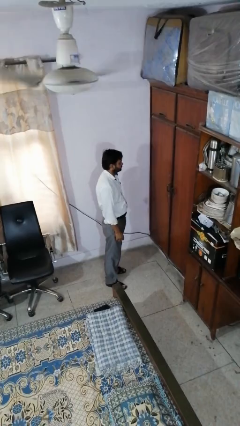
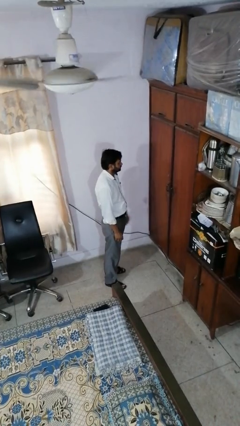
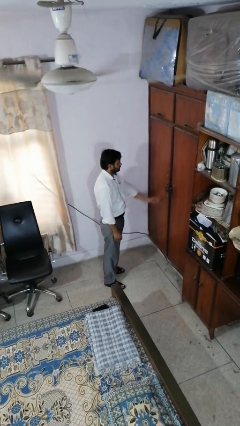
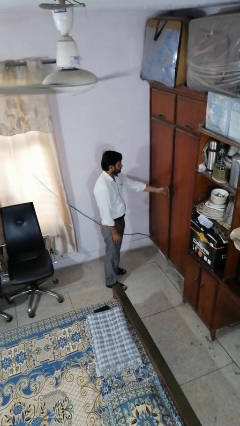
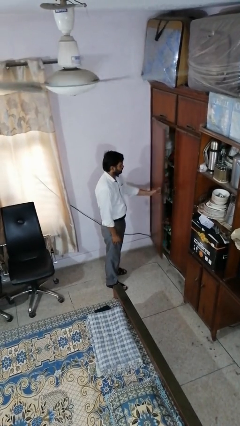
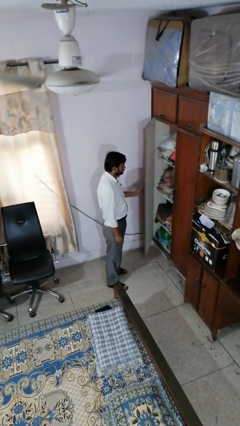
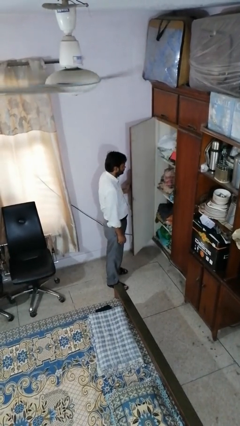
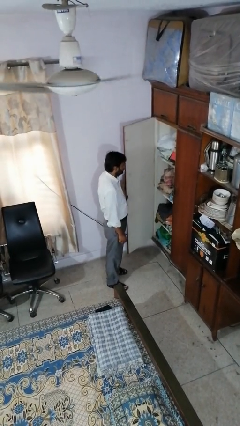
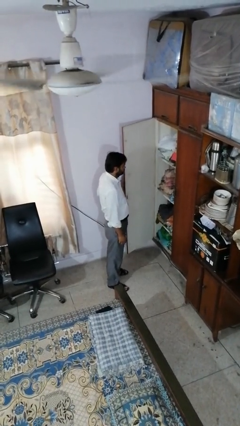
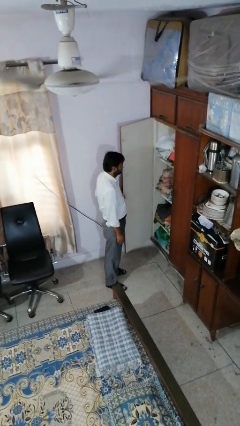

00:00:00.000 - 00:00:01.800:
person opens closet door

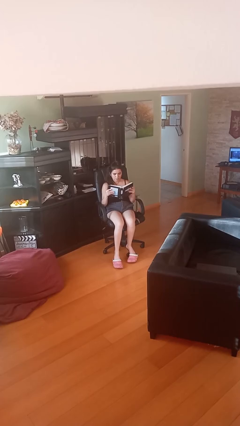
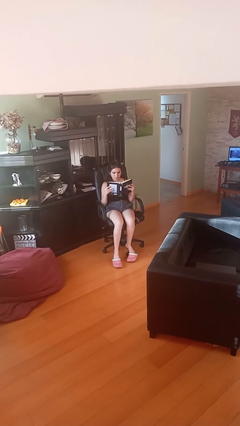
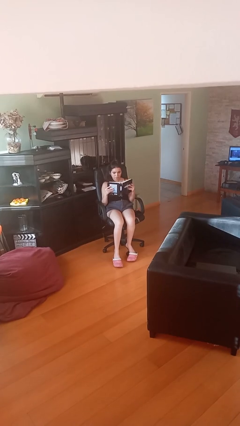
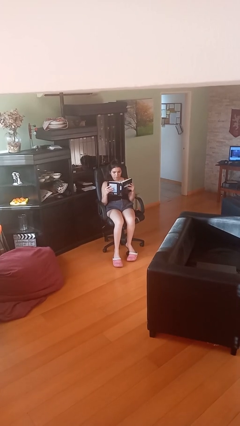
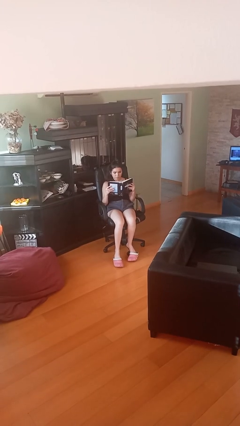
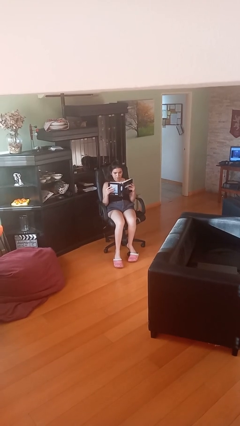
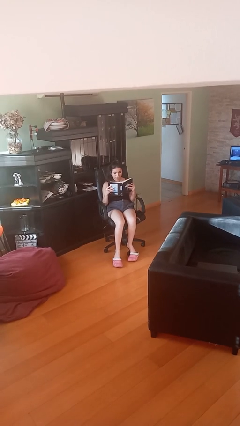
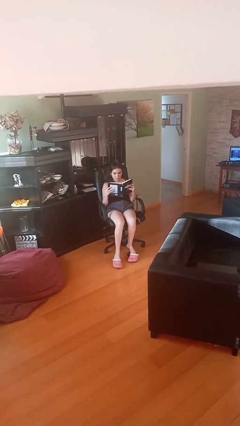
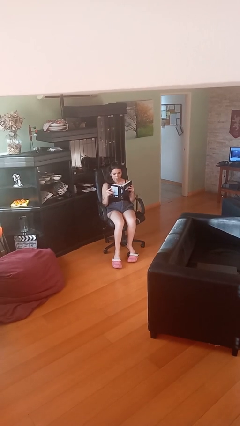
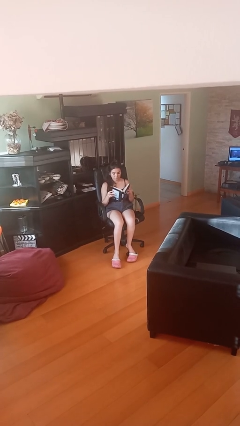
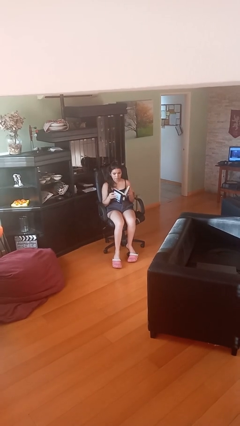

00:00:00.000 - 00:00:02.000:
person reads document

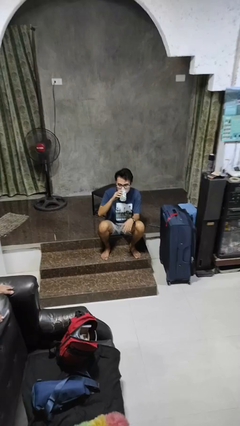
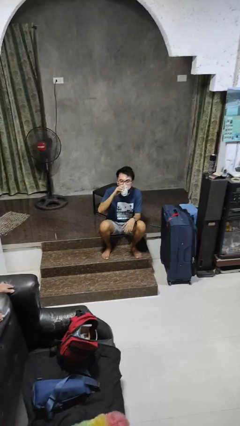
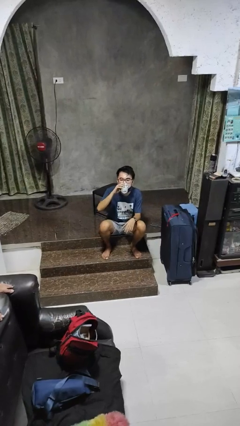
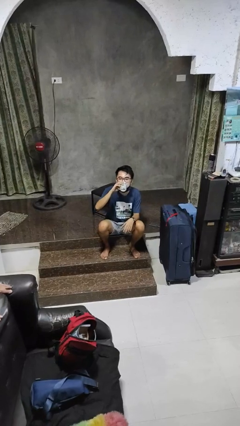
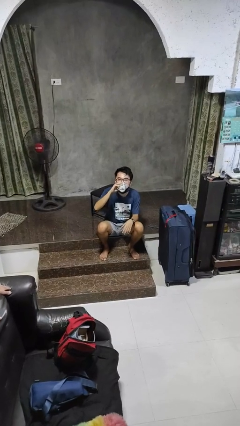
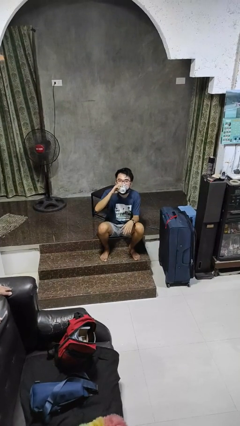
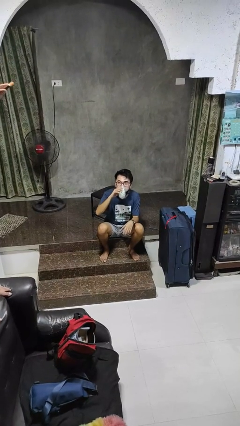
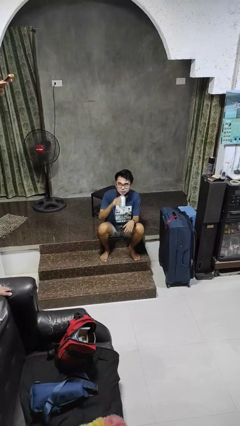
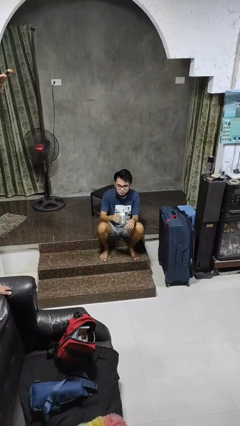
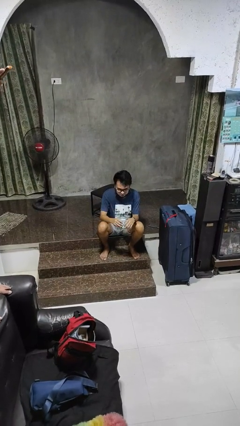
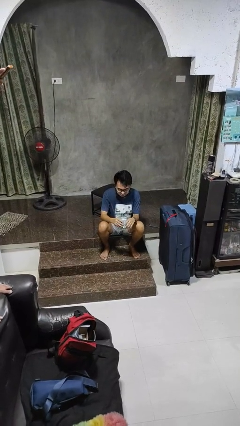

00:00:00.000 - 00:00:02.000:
person drinks from beverage can

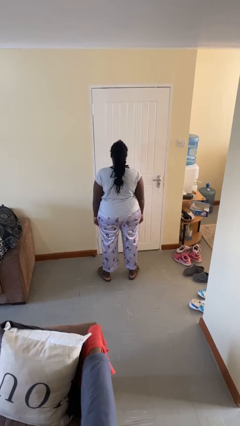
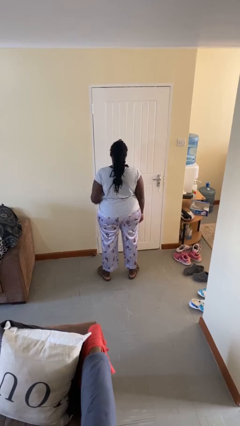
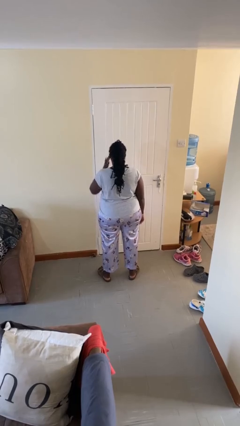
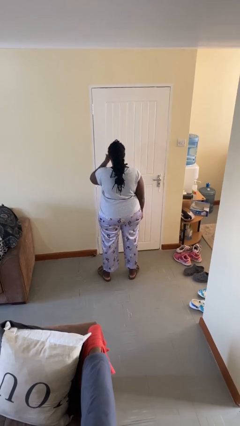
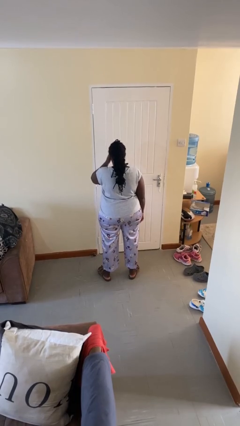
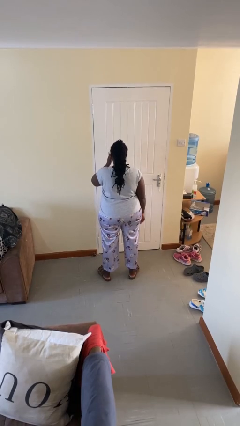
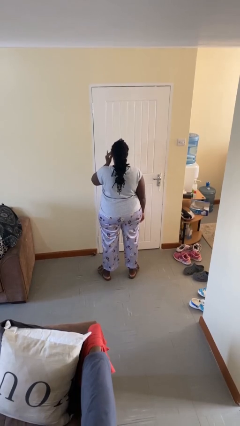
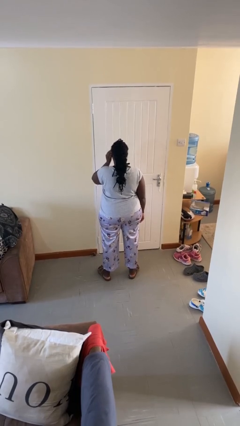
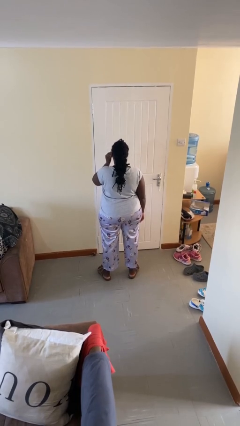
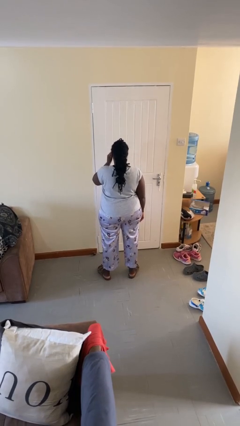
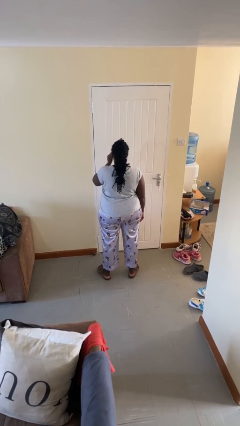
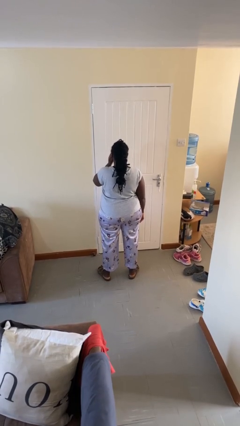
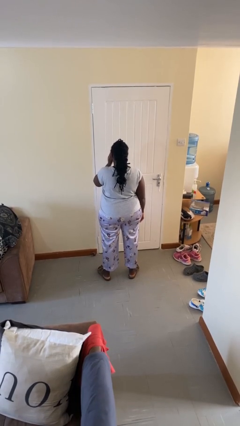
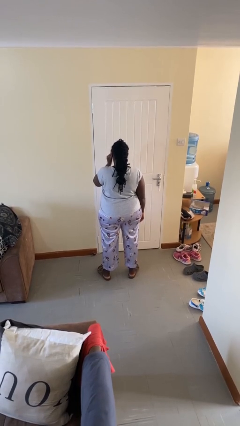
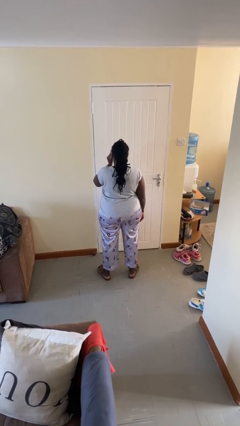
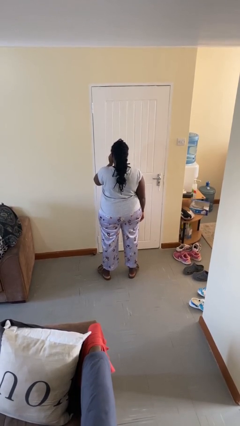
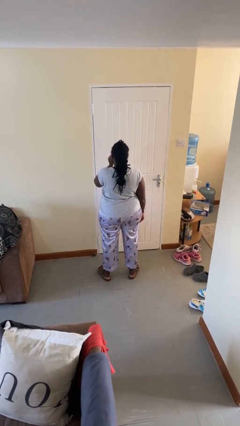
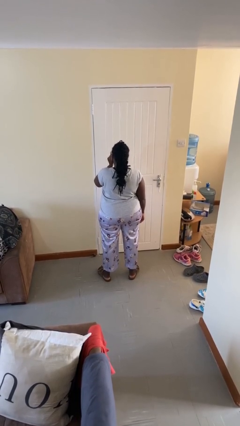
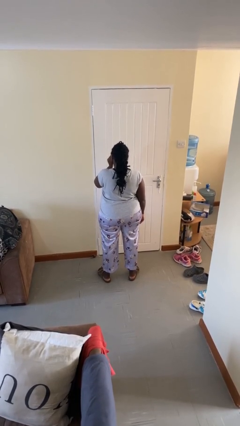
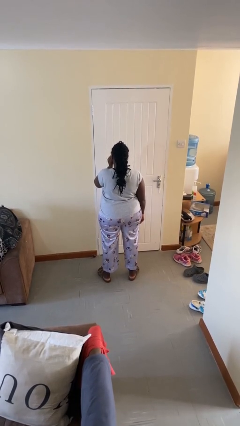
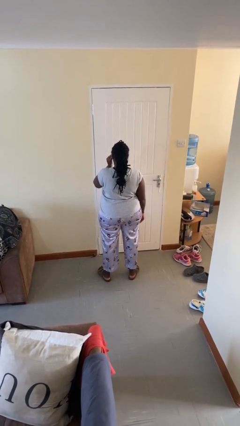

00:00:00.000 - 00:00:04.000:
person scratches face

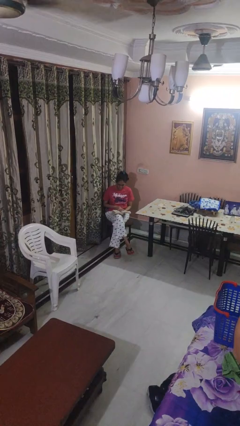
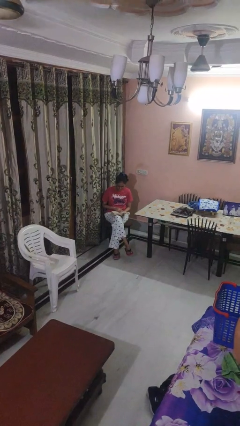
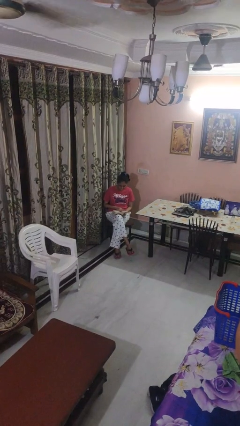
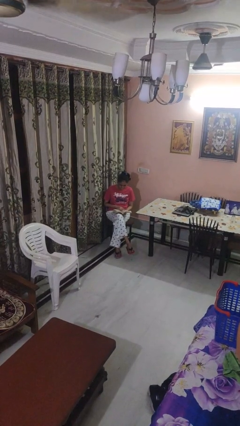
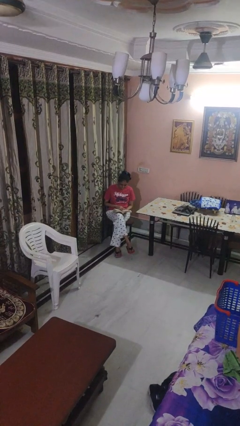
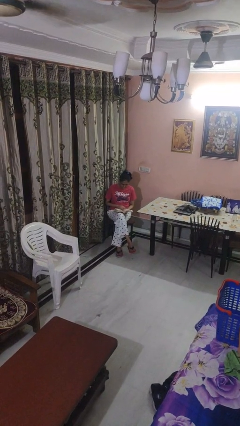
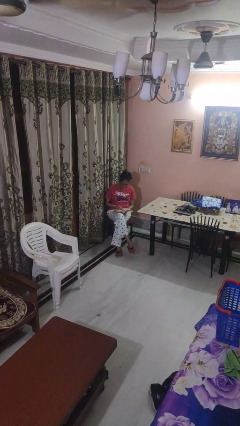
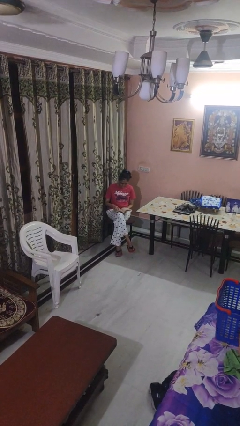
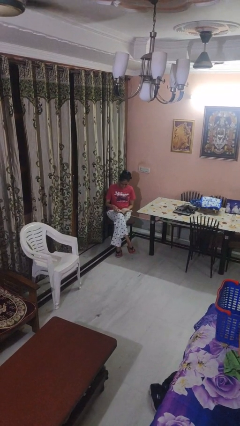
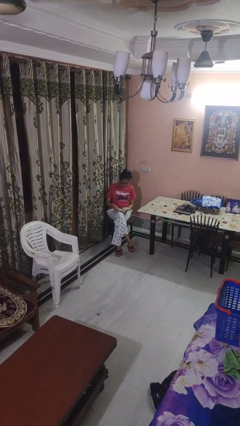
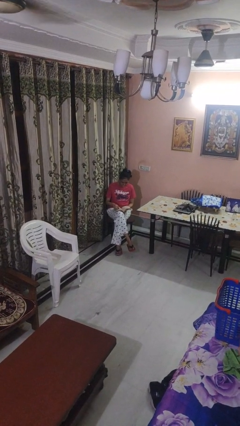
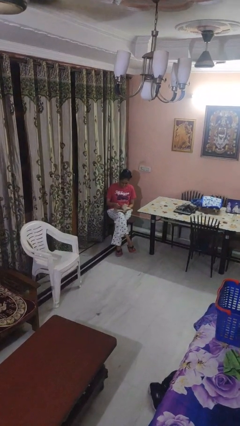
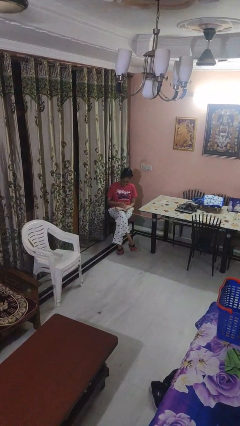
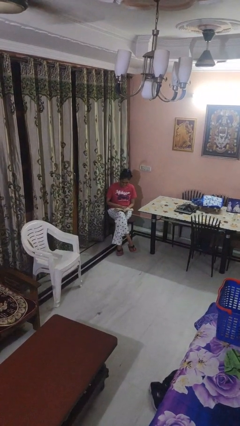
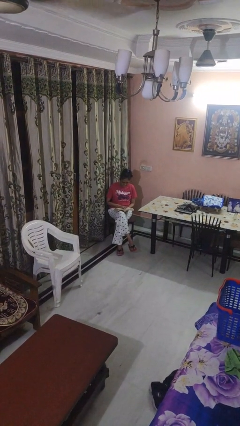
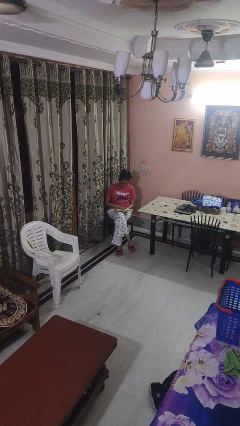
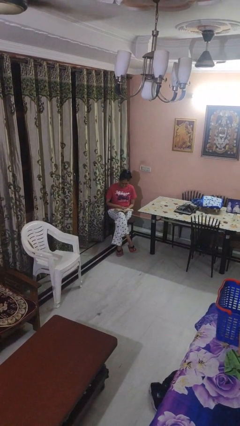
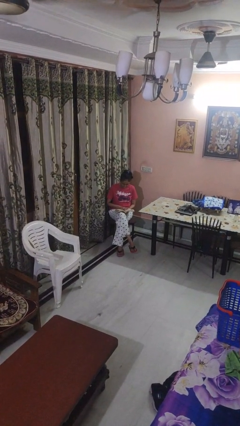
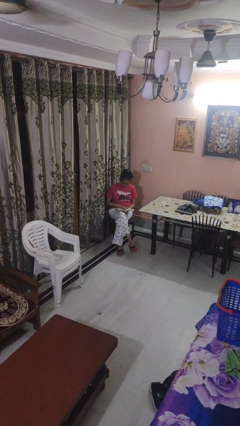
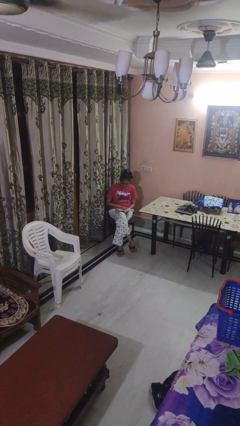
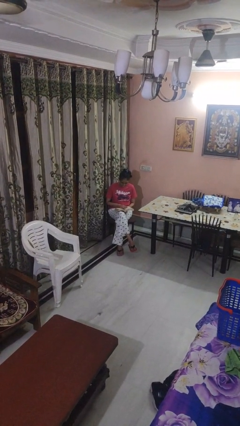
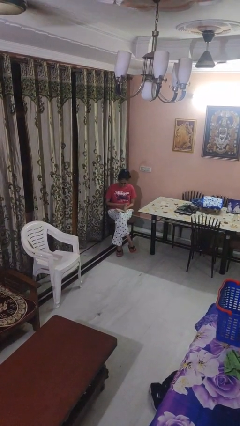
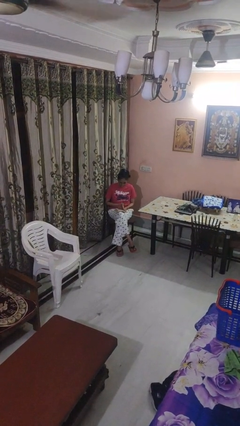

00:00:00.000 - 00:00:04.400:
person reads book

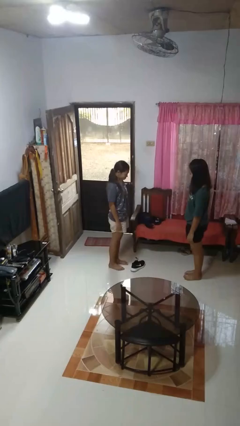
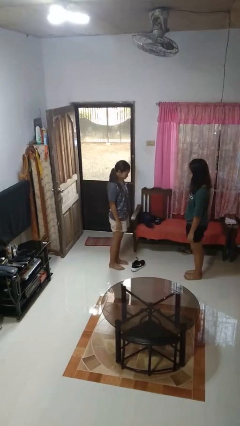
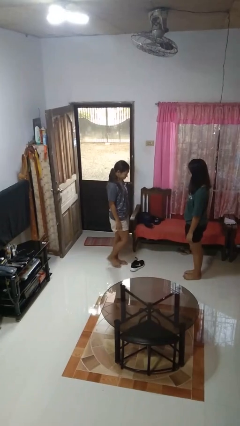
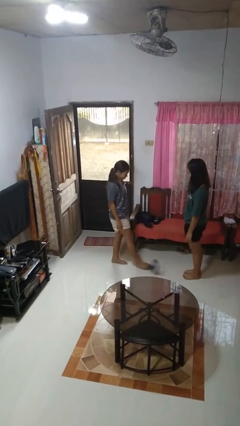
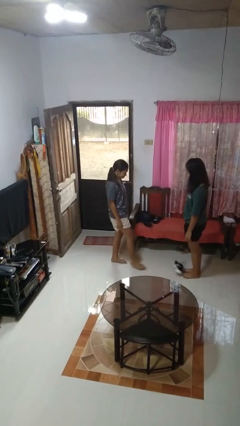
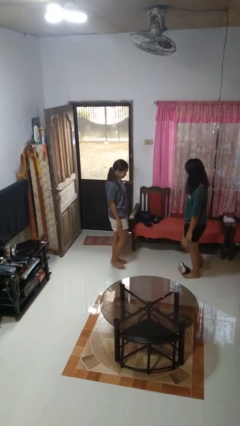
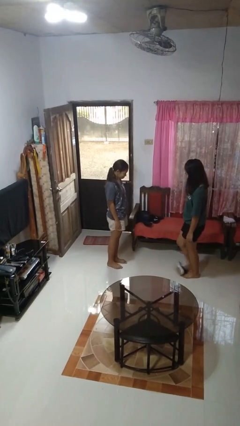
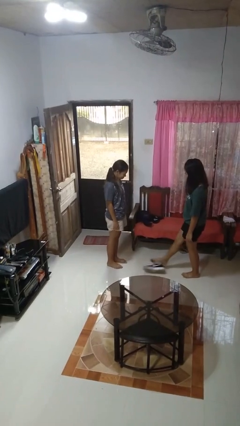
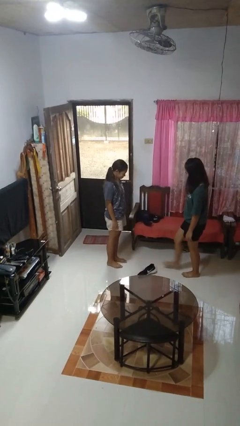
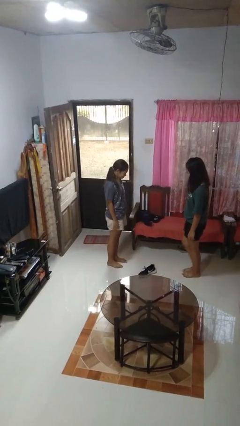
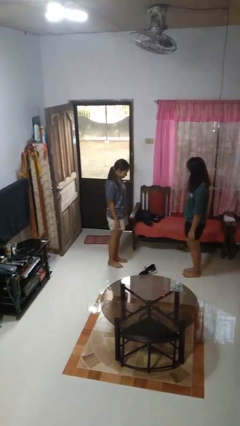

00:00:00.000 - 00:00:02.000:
person kicks object to person

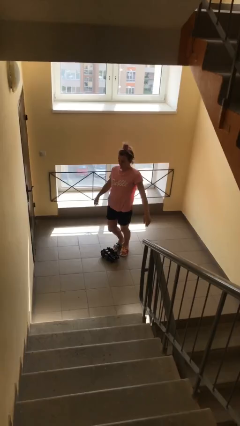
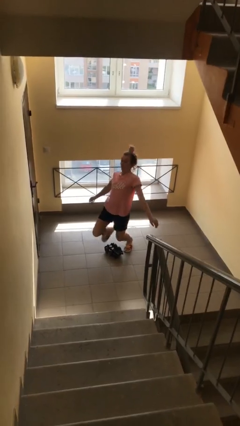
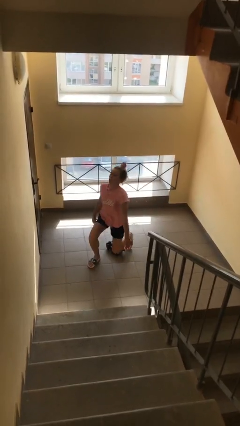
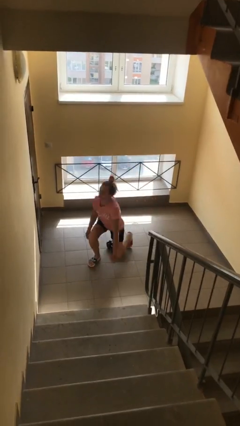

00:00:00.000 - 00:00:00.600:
person trips on object on floor

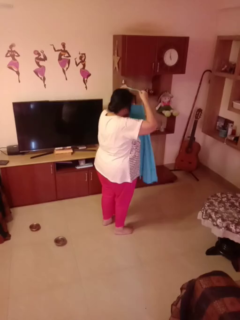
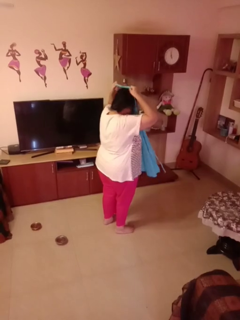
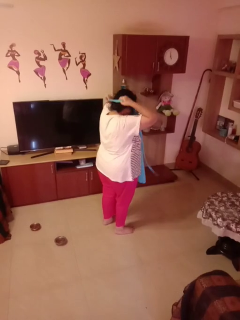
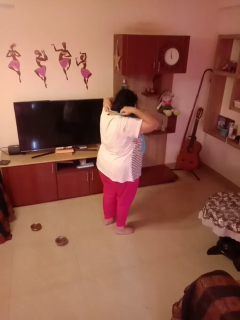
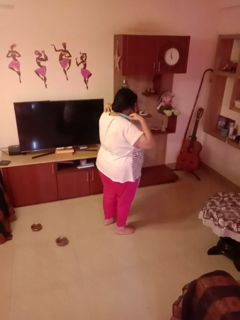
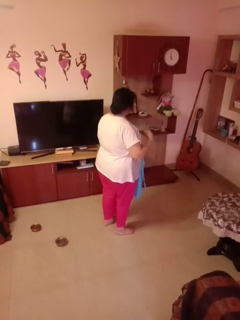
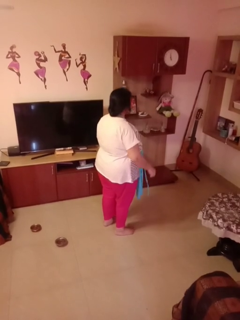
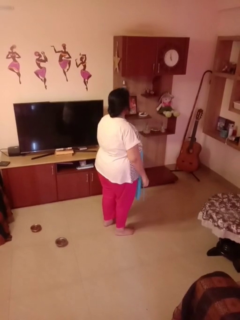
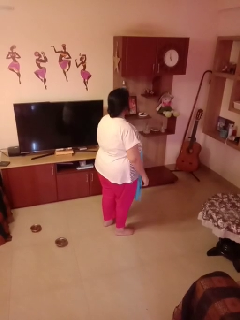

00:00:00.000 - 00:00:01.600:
person puts on apron
